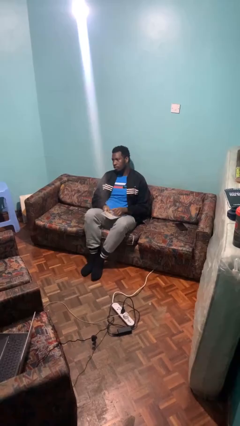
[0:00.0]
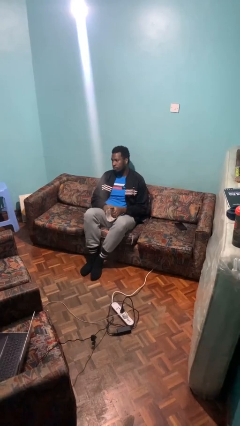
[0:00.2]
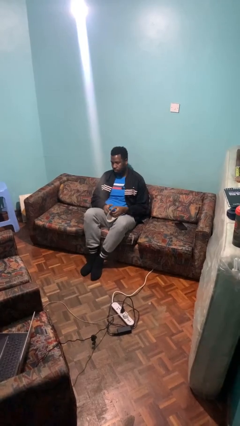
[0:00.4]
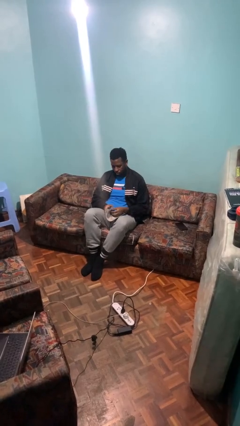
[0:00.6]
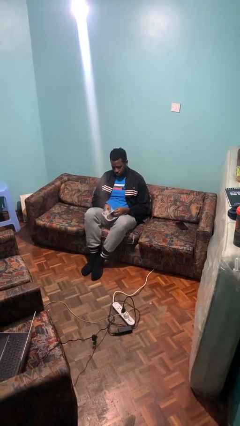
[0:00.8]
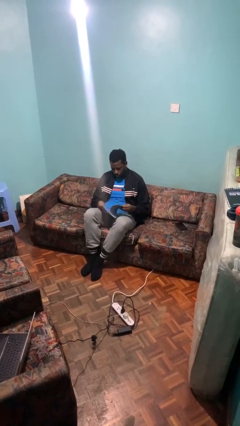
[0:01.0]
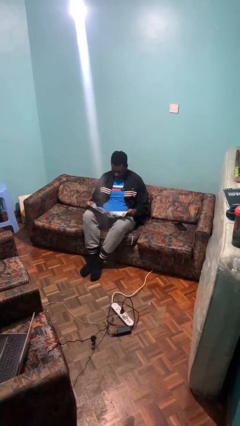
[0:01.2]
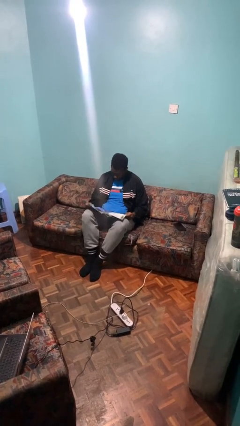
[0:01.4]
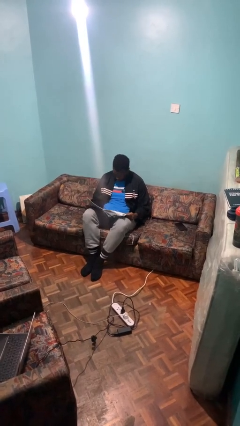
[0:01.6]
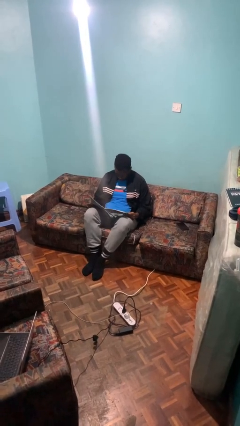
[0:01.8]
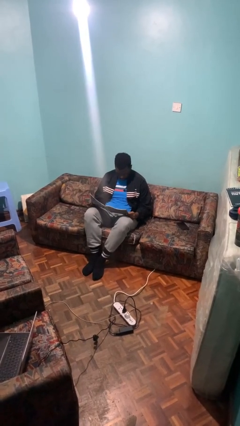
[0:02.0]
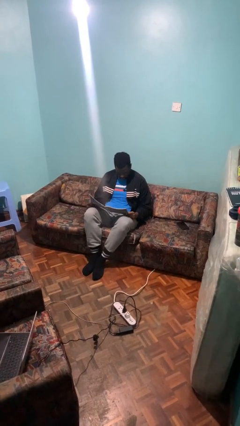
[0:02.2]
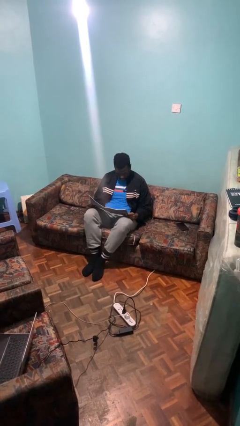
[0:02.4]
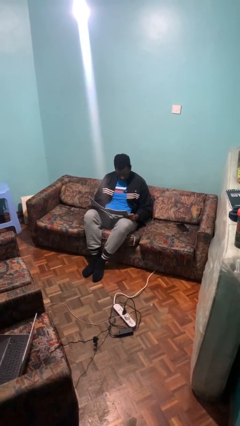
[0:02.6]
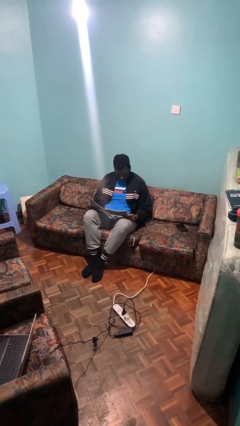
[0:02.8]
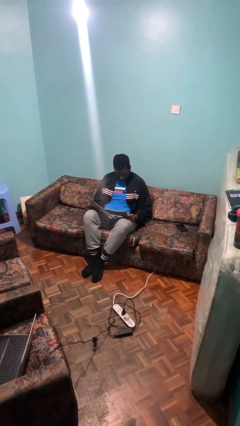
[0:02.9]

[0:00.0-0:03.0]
person reads magazine

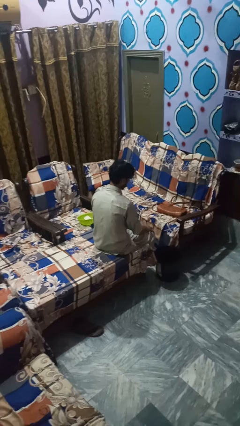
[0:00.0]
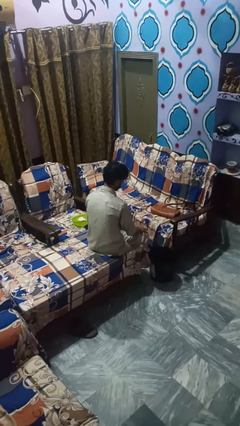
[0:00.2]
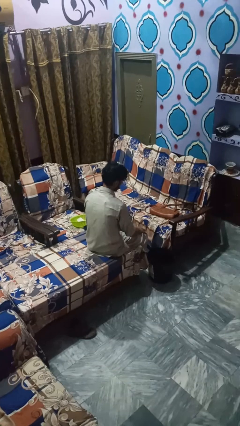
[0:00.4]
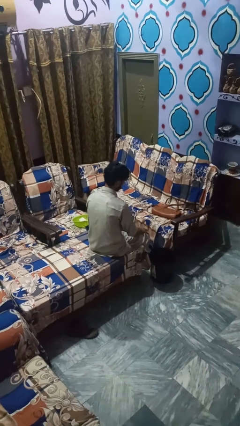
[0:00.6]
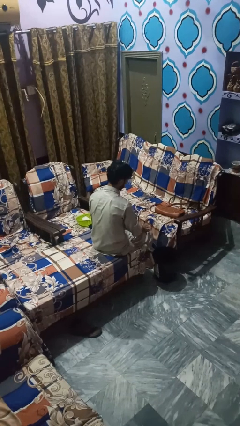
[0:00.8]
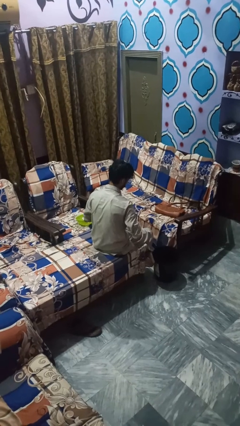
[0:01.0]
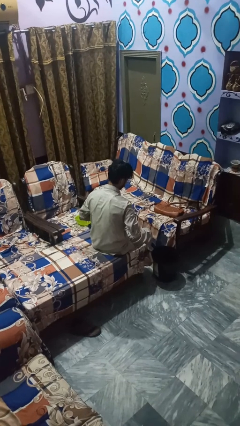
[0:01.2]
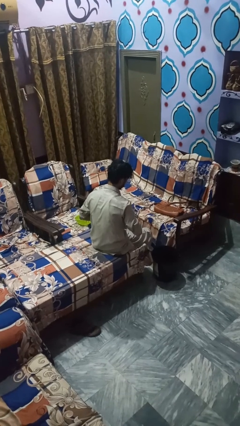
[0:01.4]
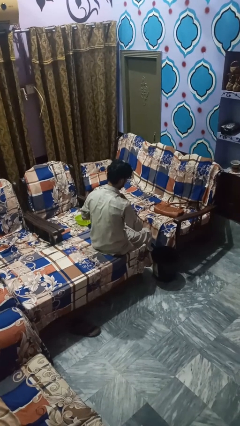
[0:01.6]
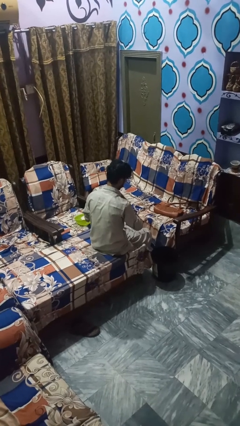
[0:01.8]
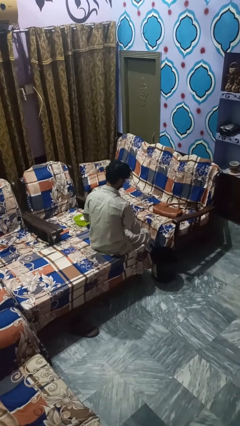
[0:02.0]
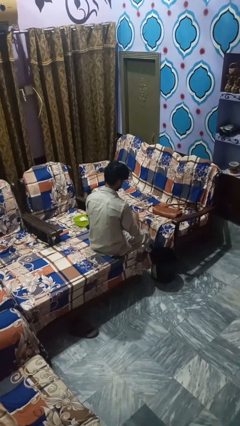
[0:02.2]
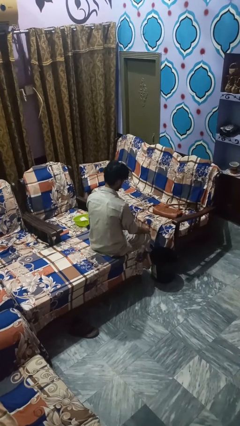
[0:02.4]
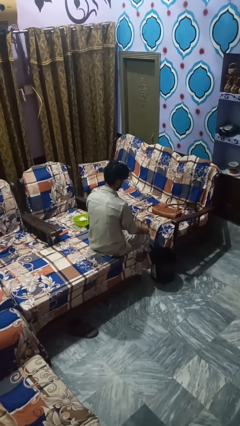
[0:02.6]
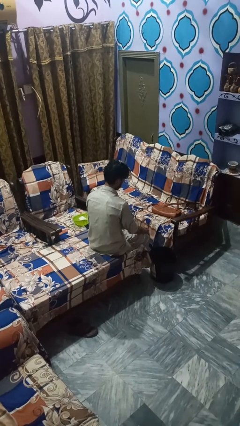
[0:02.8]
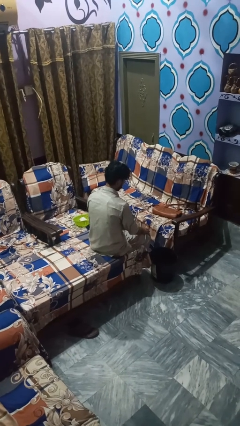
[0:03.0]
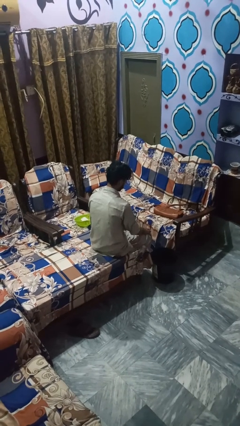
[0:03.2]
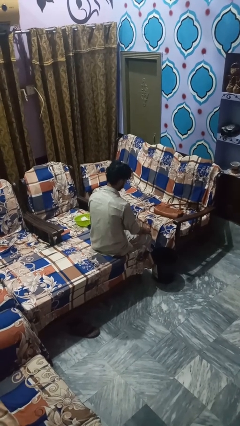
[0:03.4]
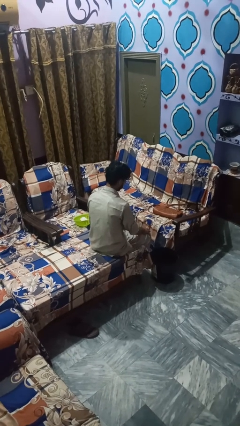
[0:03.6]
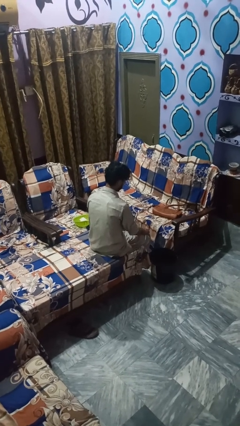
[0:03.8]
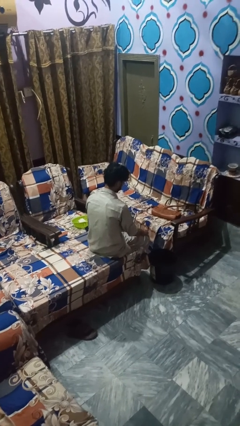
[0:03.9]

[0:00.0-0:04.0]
person unbuttons shirt

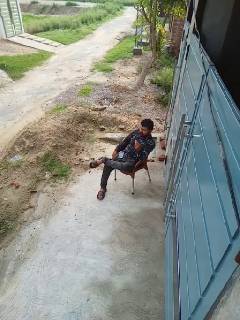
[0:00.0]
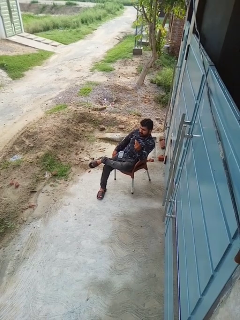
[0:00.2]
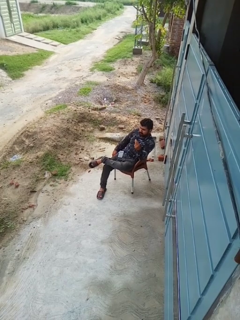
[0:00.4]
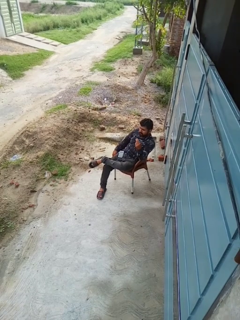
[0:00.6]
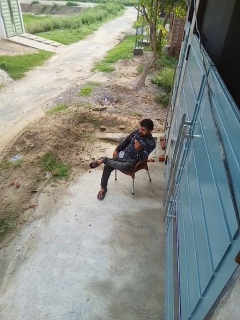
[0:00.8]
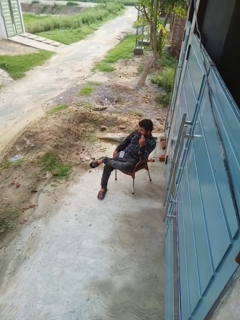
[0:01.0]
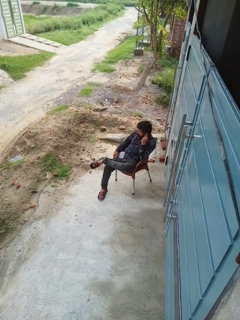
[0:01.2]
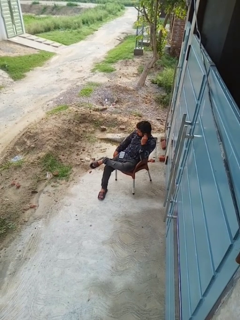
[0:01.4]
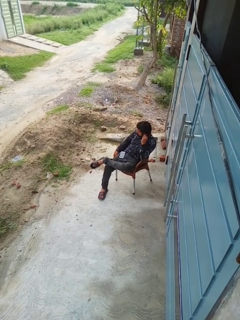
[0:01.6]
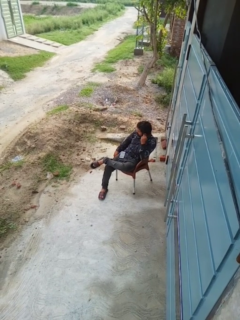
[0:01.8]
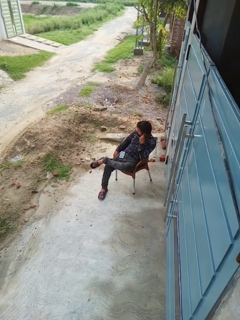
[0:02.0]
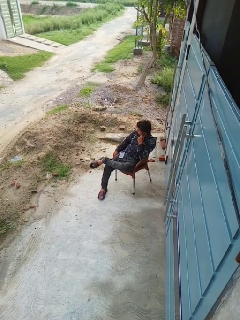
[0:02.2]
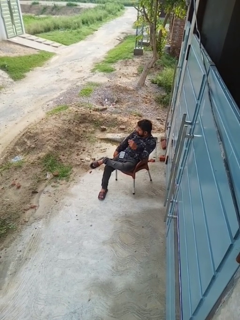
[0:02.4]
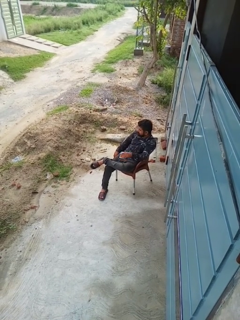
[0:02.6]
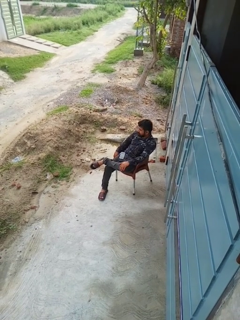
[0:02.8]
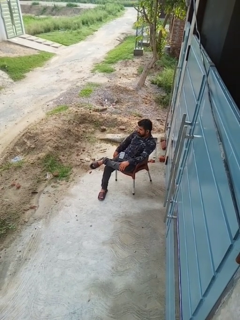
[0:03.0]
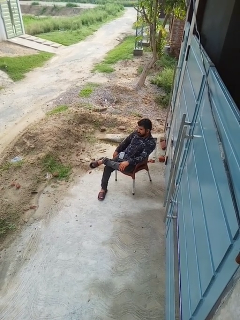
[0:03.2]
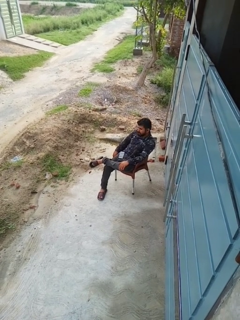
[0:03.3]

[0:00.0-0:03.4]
person puts on headphones

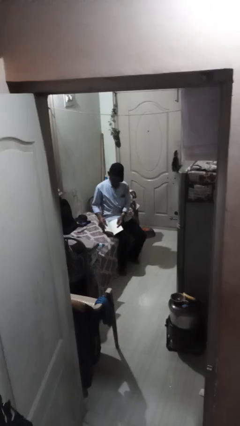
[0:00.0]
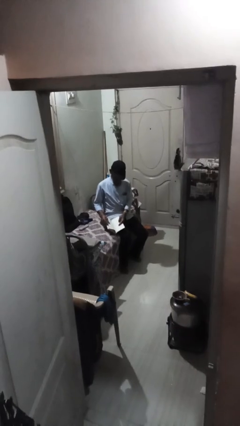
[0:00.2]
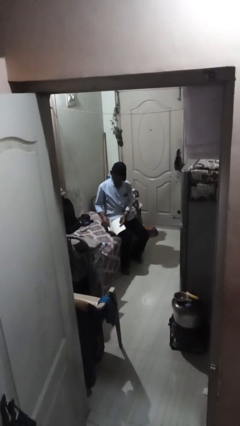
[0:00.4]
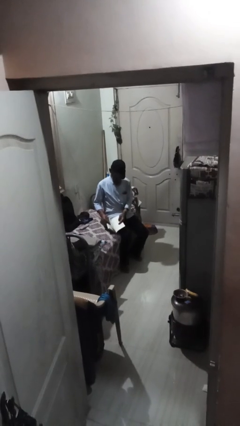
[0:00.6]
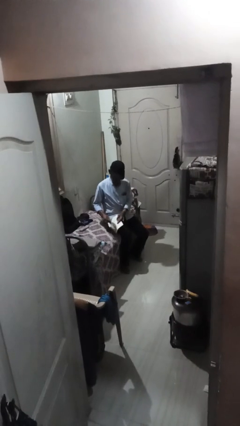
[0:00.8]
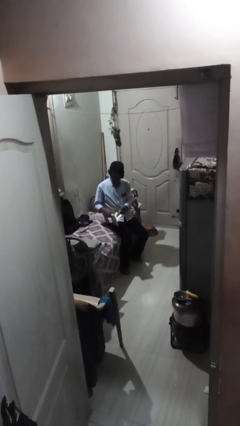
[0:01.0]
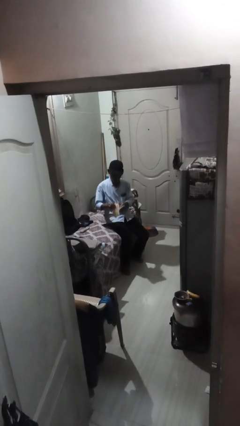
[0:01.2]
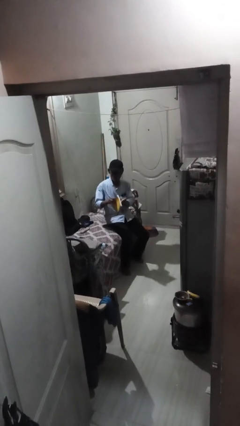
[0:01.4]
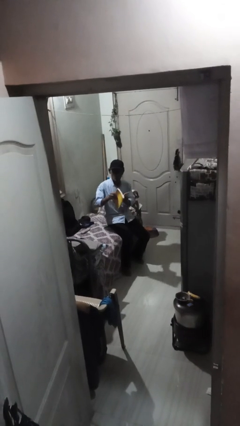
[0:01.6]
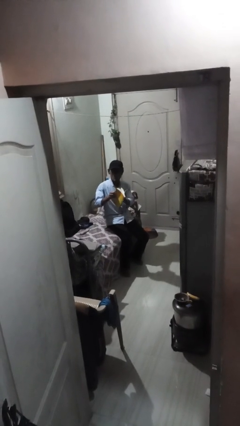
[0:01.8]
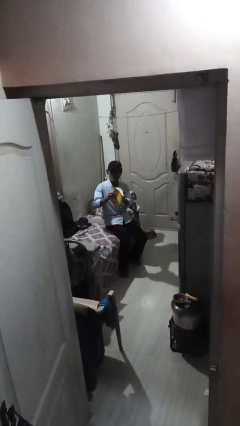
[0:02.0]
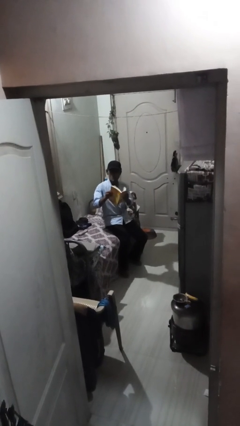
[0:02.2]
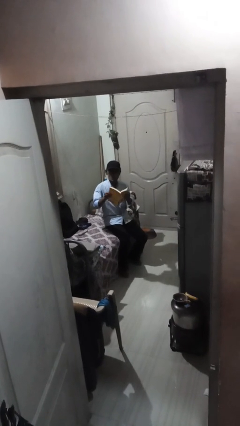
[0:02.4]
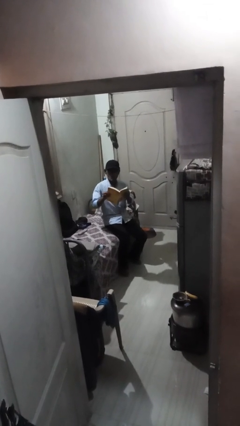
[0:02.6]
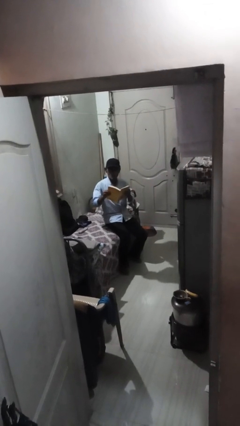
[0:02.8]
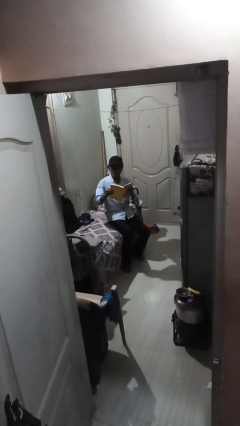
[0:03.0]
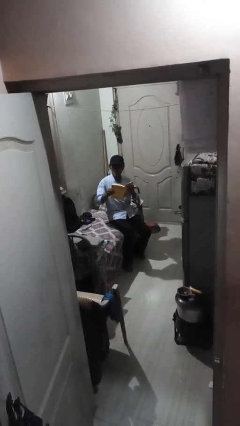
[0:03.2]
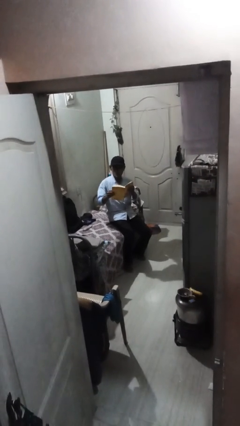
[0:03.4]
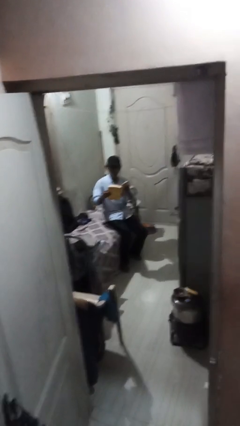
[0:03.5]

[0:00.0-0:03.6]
person reads book

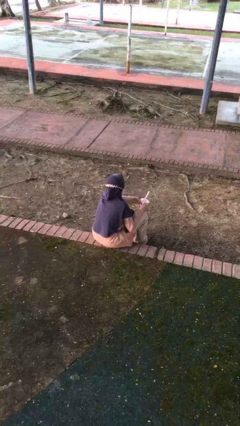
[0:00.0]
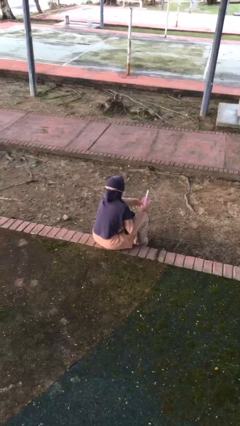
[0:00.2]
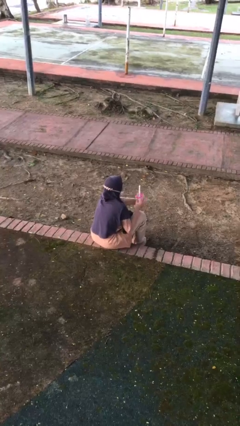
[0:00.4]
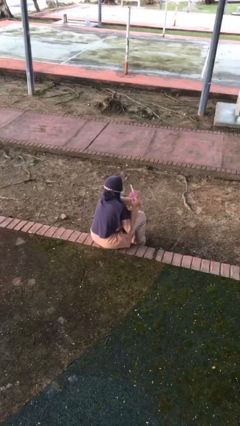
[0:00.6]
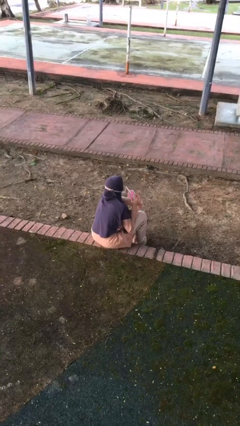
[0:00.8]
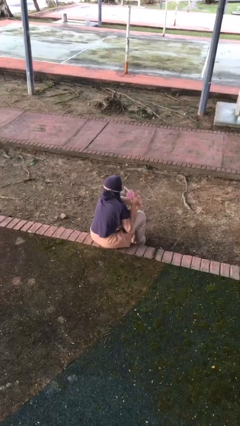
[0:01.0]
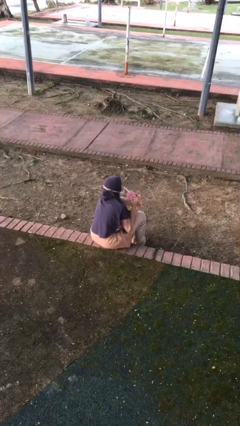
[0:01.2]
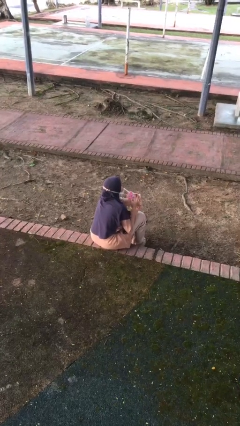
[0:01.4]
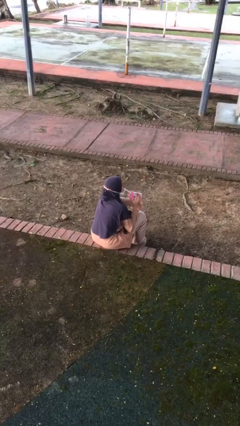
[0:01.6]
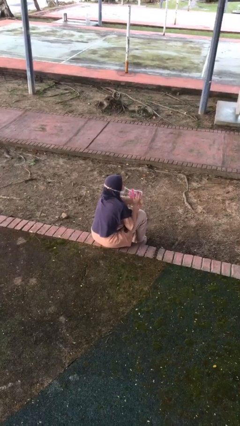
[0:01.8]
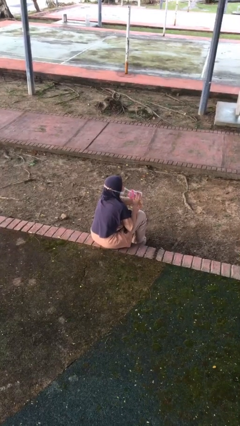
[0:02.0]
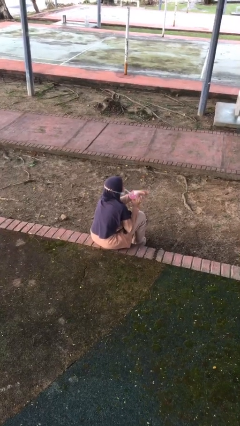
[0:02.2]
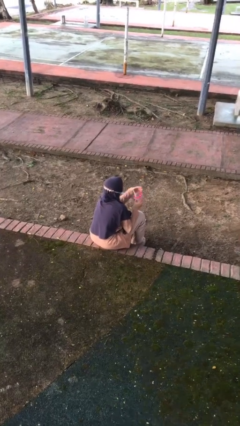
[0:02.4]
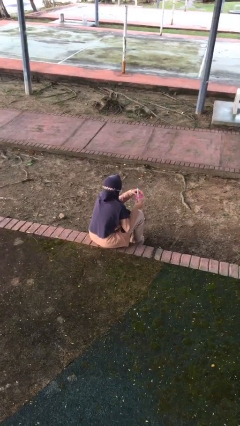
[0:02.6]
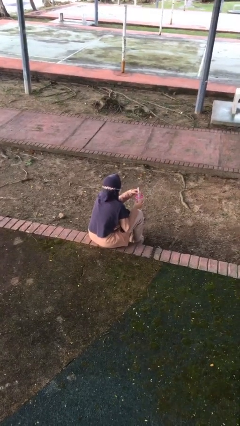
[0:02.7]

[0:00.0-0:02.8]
person drinks from straw

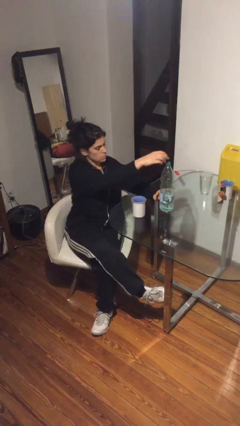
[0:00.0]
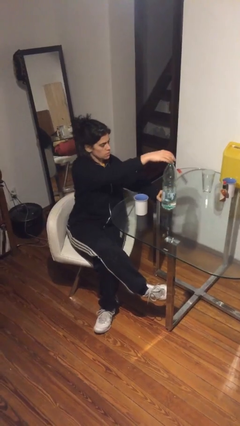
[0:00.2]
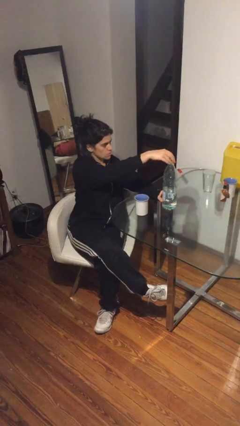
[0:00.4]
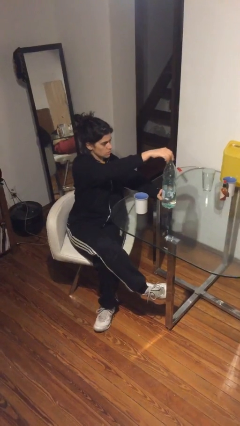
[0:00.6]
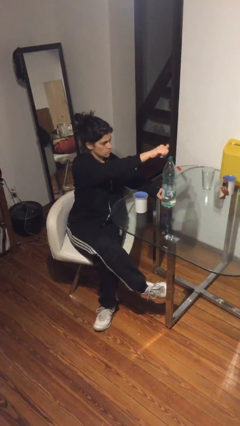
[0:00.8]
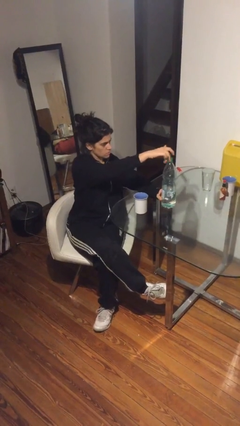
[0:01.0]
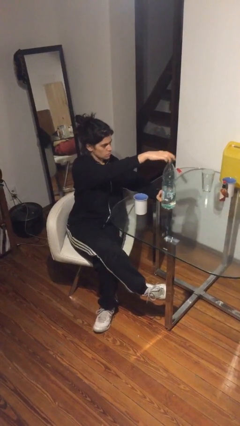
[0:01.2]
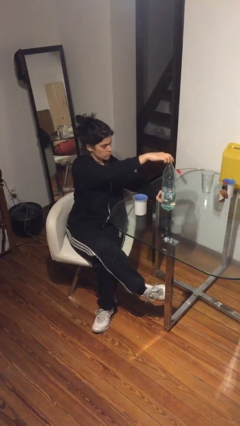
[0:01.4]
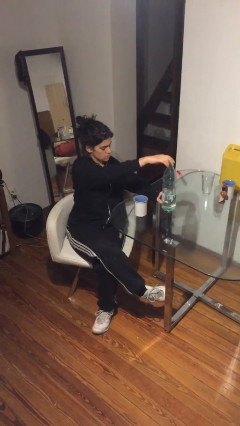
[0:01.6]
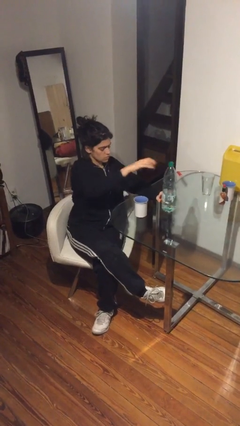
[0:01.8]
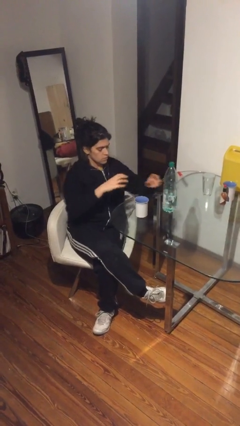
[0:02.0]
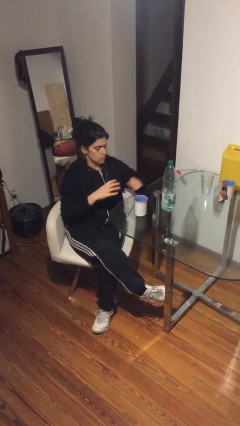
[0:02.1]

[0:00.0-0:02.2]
person screws lid to bottle
